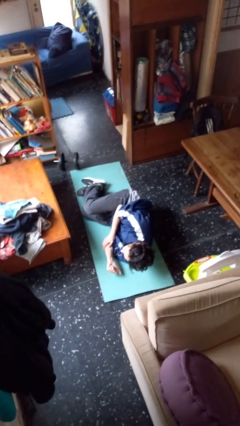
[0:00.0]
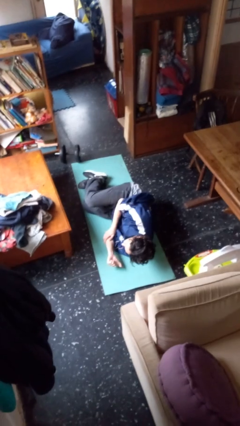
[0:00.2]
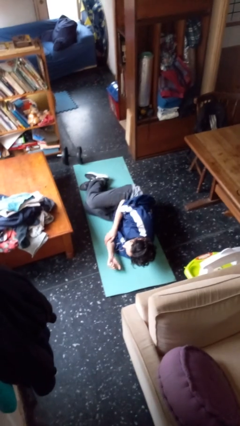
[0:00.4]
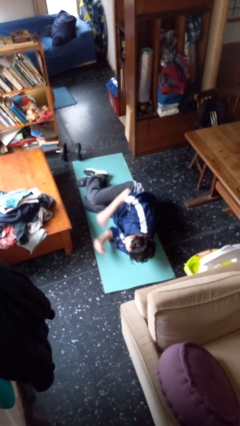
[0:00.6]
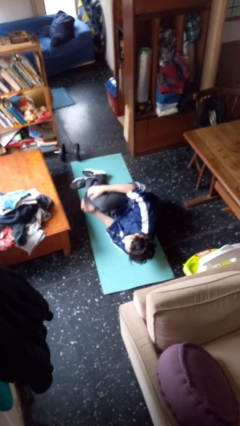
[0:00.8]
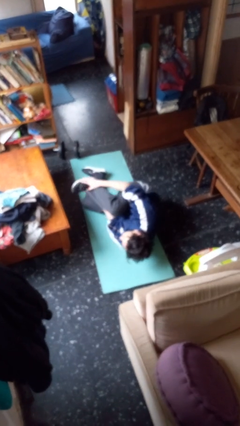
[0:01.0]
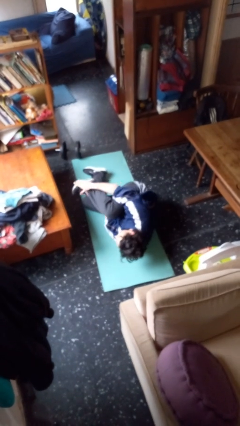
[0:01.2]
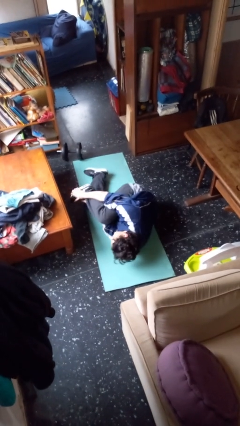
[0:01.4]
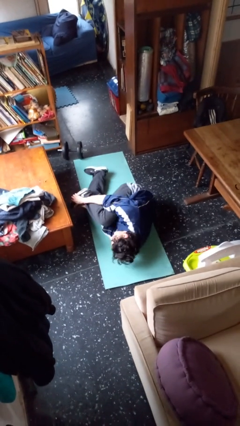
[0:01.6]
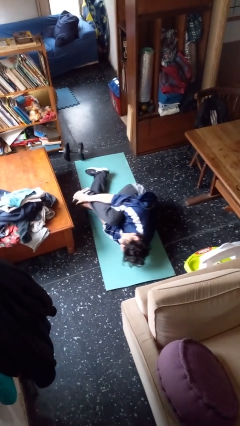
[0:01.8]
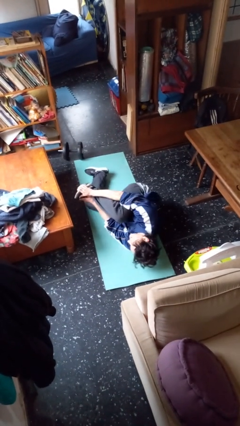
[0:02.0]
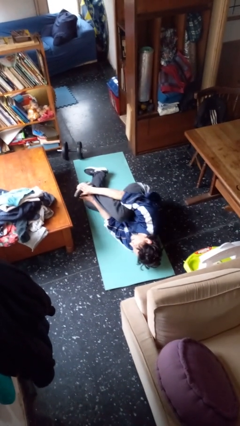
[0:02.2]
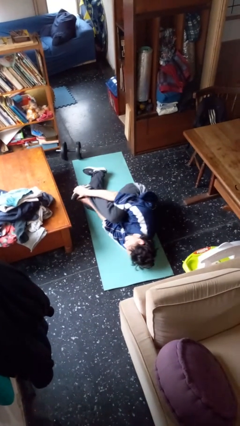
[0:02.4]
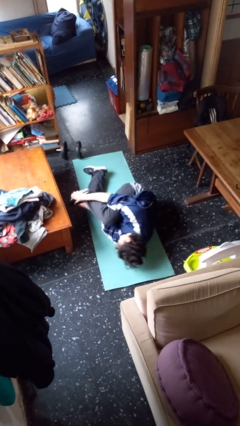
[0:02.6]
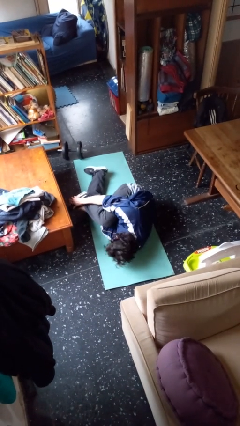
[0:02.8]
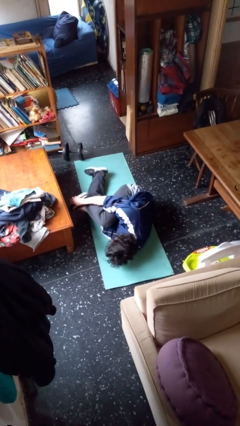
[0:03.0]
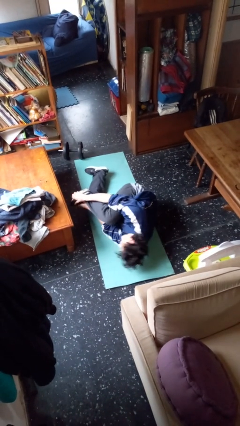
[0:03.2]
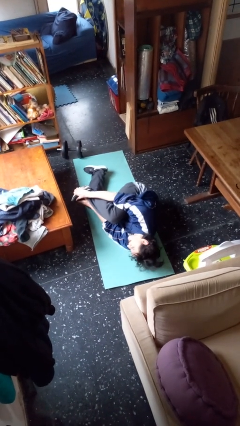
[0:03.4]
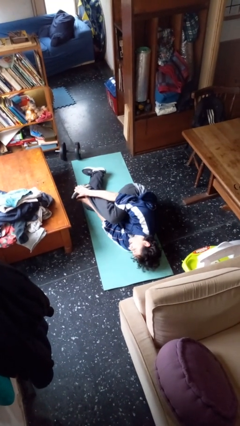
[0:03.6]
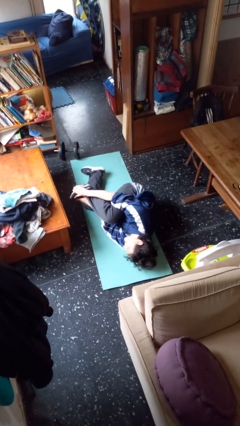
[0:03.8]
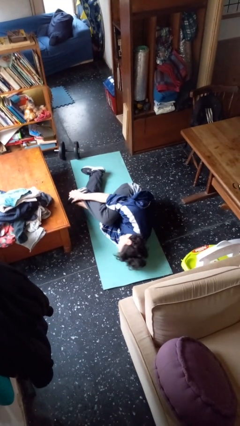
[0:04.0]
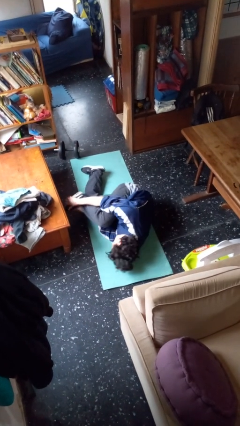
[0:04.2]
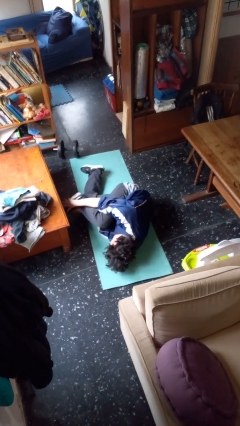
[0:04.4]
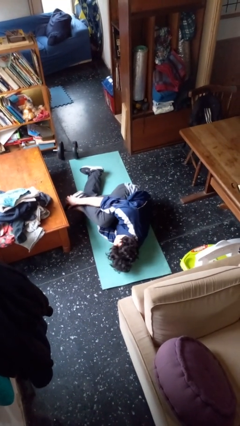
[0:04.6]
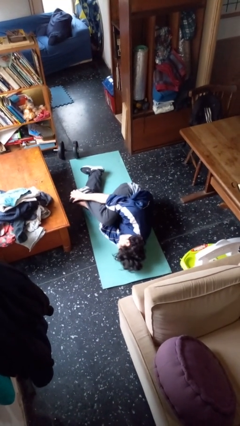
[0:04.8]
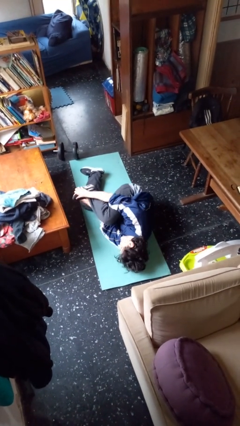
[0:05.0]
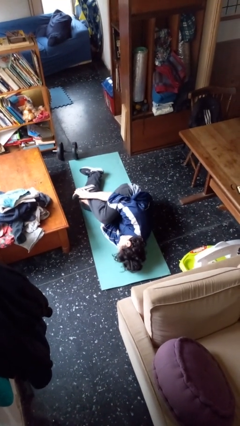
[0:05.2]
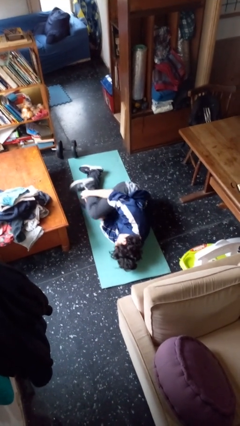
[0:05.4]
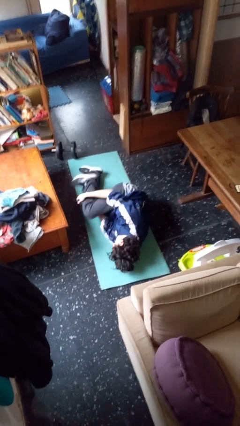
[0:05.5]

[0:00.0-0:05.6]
person lies down on floor

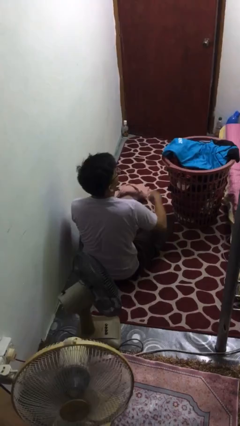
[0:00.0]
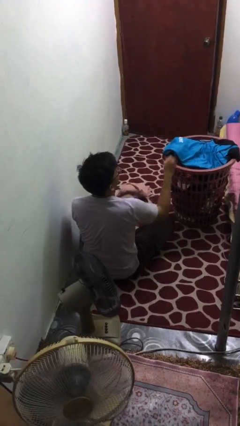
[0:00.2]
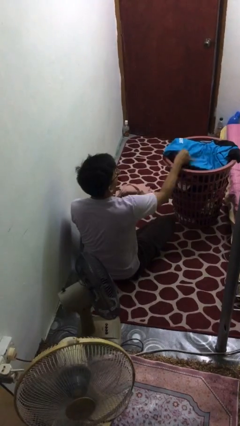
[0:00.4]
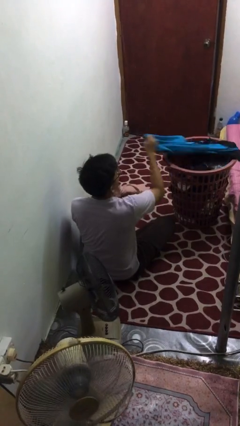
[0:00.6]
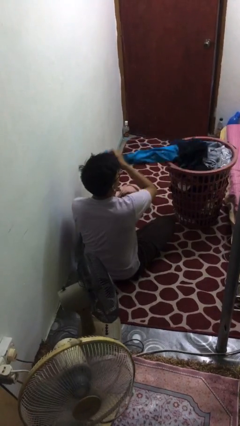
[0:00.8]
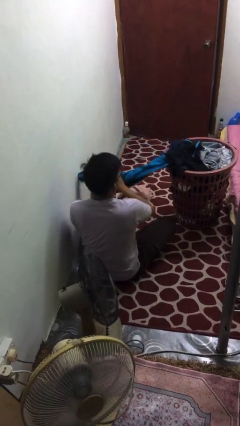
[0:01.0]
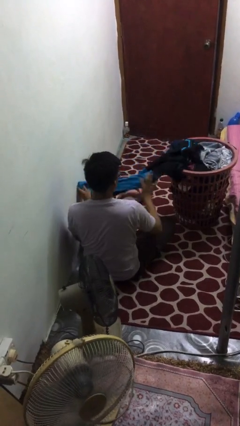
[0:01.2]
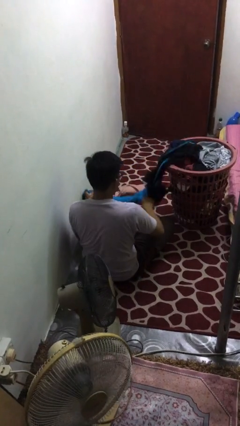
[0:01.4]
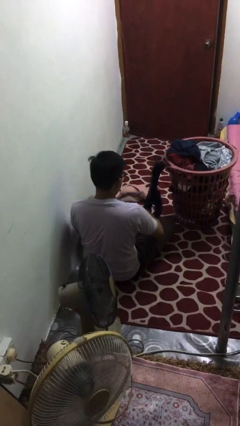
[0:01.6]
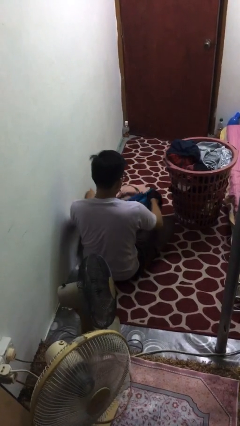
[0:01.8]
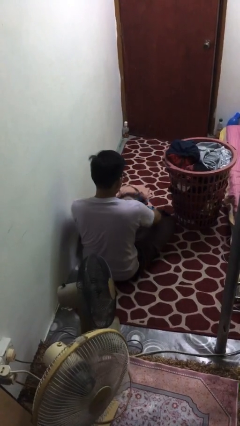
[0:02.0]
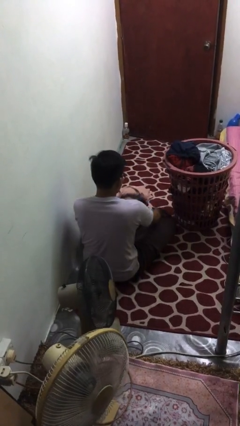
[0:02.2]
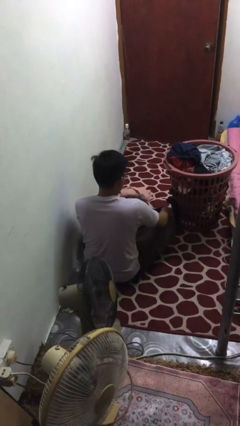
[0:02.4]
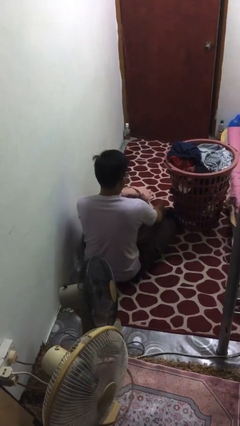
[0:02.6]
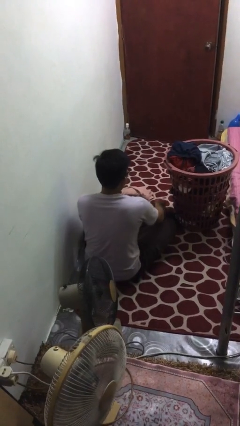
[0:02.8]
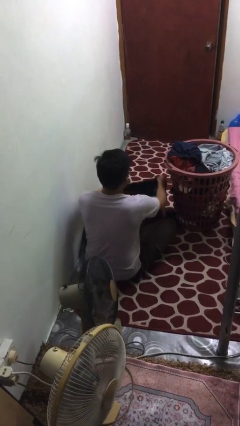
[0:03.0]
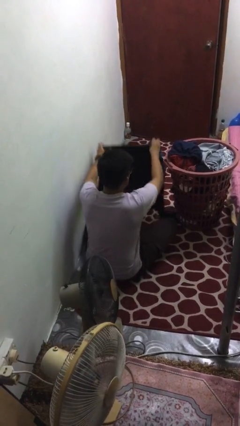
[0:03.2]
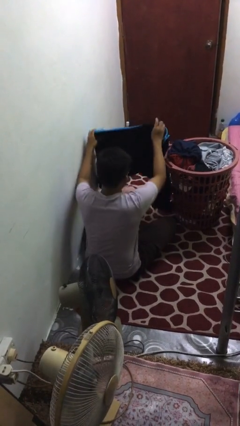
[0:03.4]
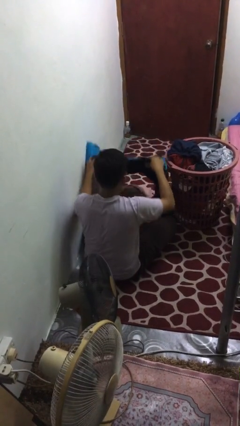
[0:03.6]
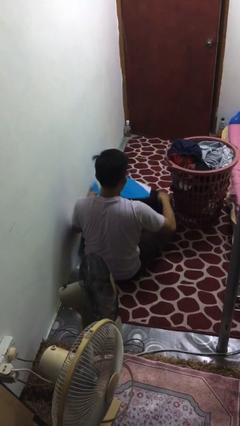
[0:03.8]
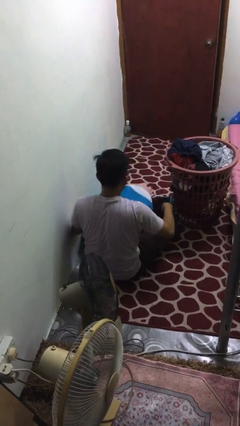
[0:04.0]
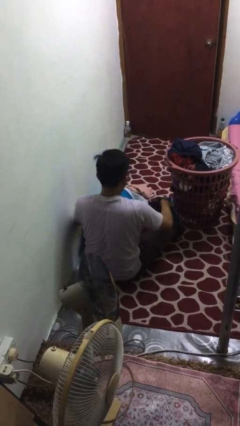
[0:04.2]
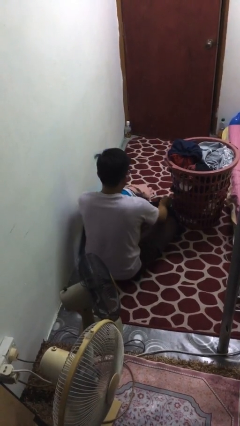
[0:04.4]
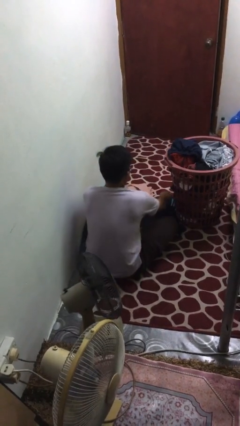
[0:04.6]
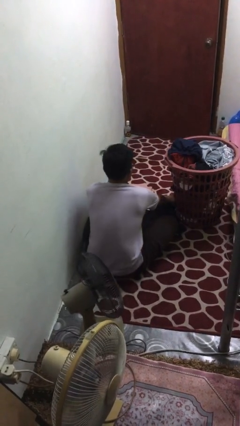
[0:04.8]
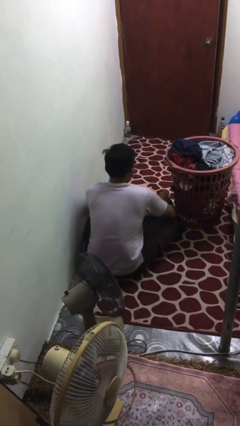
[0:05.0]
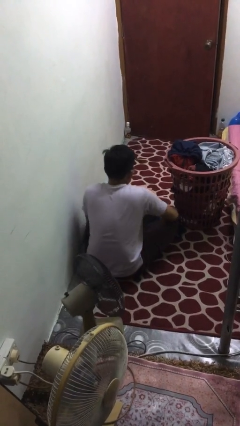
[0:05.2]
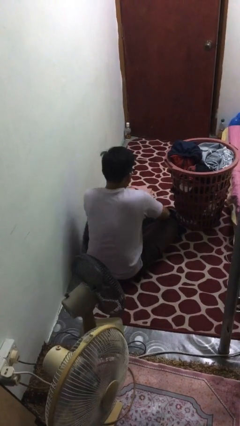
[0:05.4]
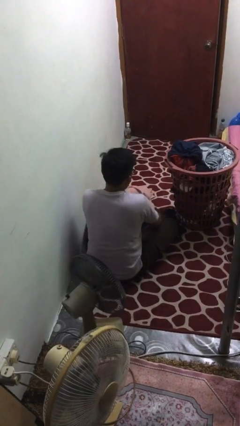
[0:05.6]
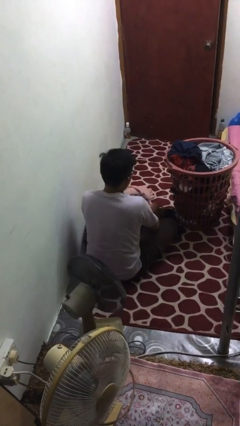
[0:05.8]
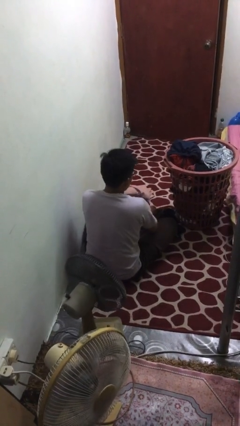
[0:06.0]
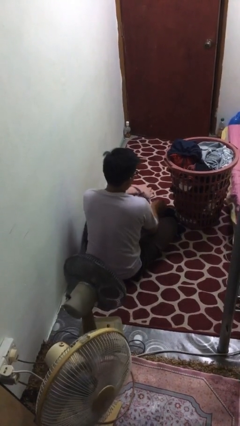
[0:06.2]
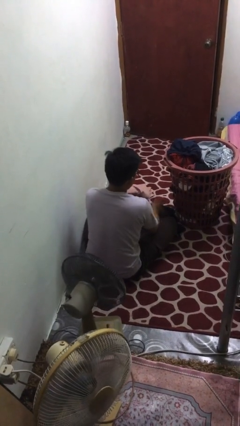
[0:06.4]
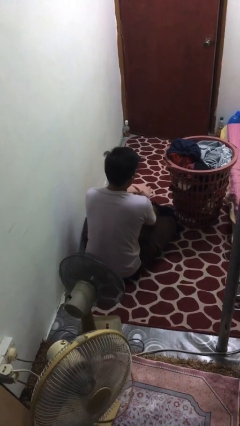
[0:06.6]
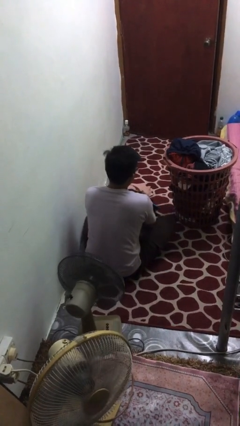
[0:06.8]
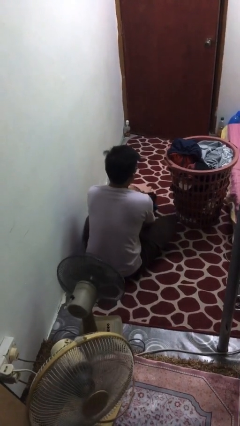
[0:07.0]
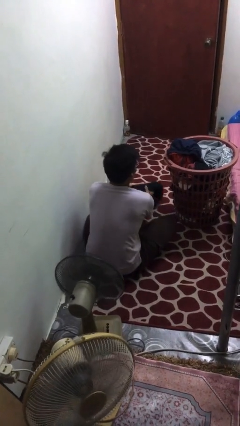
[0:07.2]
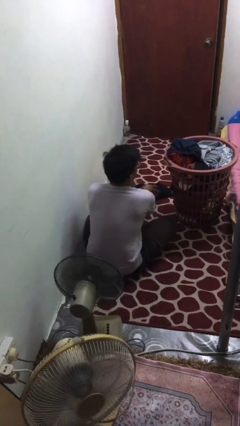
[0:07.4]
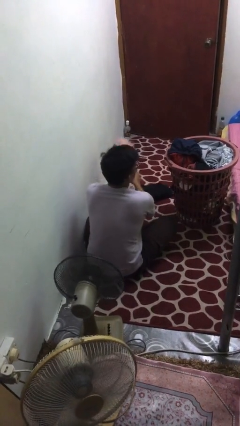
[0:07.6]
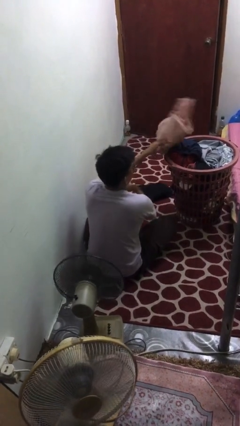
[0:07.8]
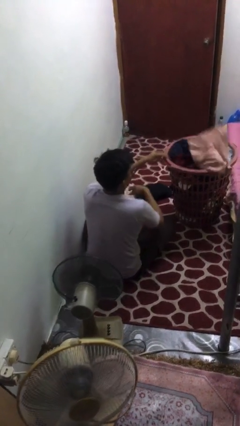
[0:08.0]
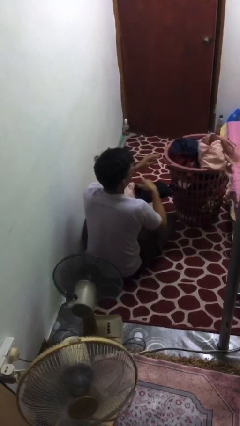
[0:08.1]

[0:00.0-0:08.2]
person folds shirt

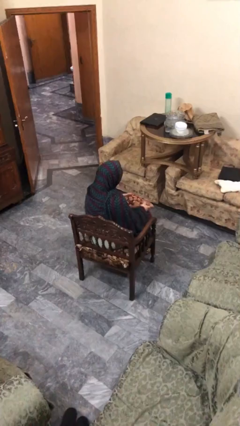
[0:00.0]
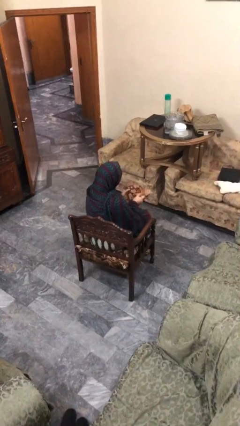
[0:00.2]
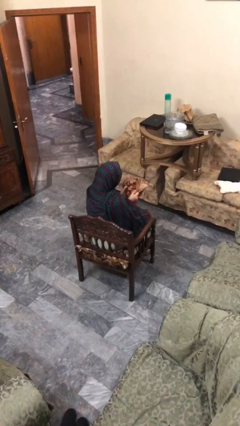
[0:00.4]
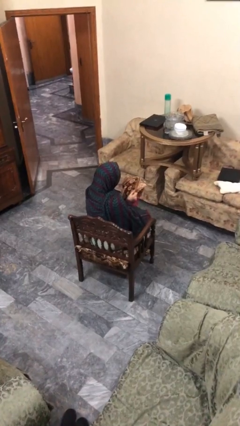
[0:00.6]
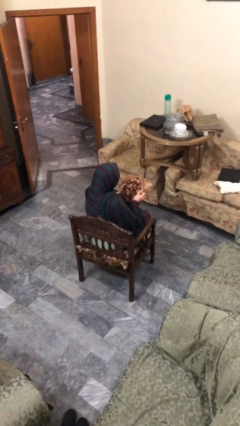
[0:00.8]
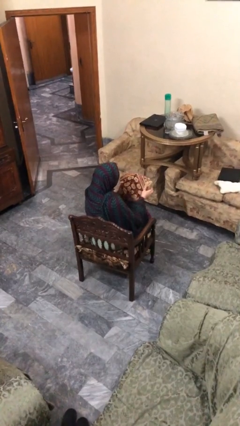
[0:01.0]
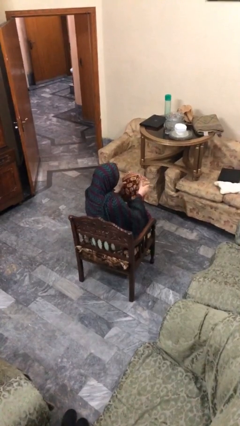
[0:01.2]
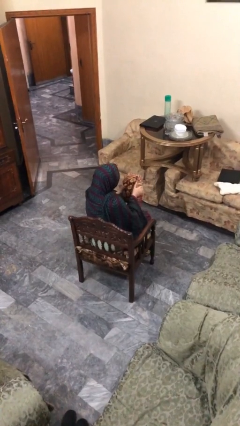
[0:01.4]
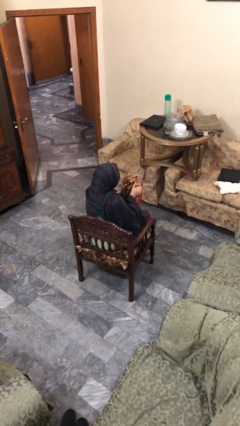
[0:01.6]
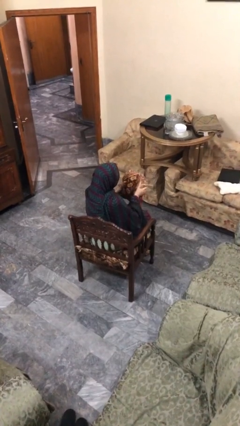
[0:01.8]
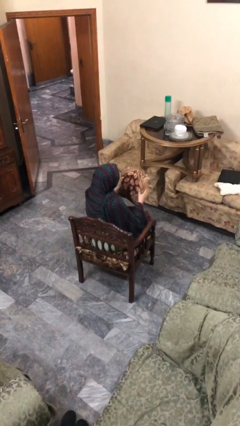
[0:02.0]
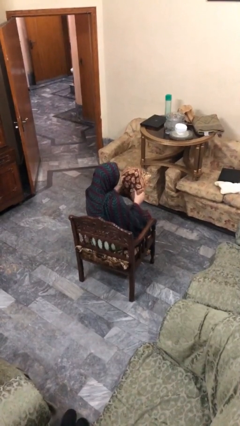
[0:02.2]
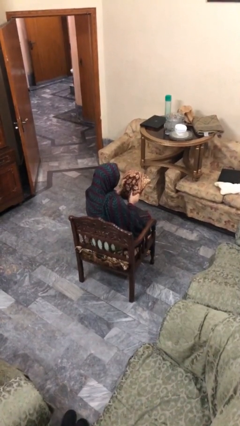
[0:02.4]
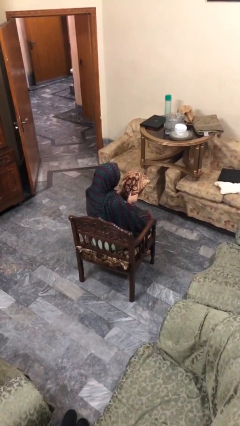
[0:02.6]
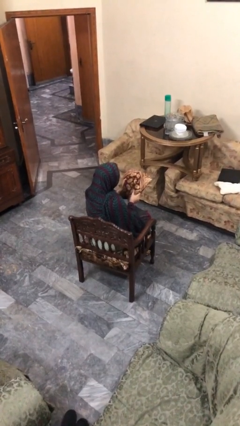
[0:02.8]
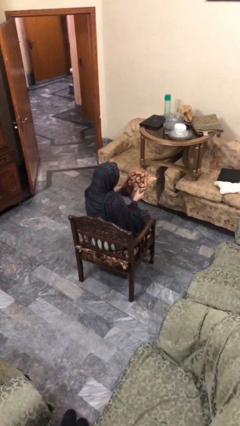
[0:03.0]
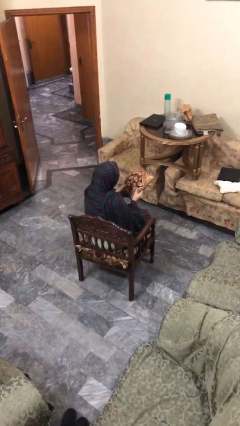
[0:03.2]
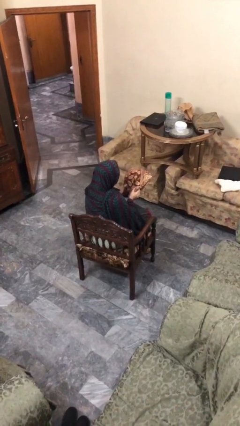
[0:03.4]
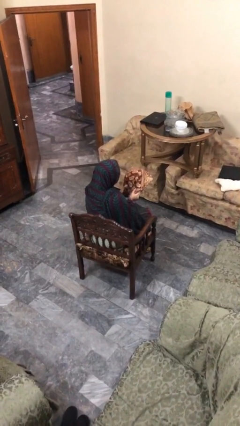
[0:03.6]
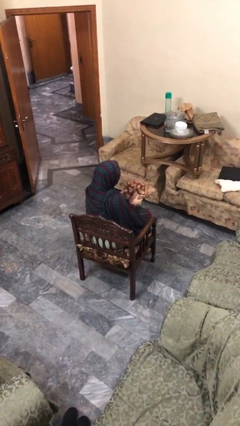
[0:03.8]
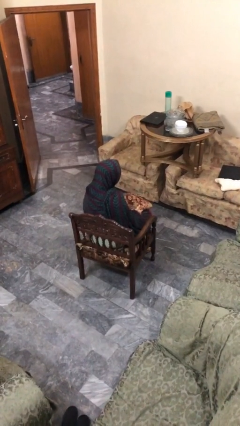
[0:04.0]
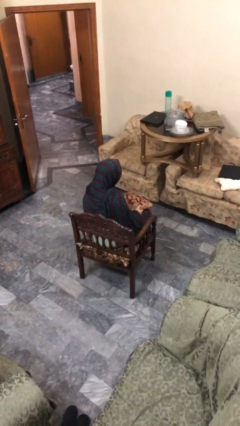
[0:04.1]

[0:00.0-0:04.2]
person squeezes object
